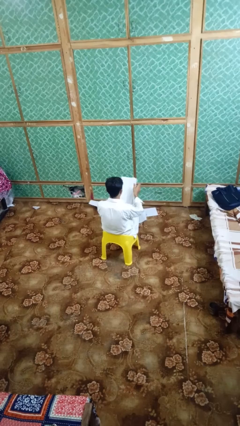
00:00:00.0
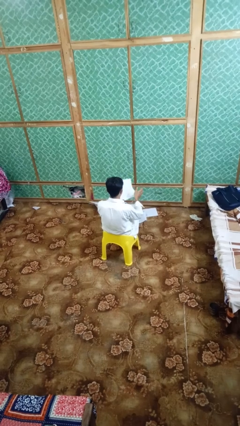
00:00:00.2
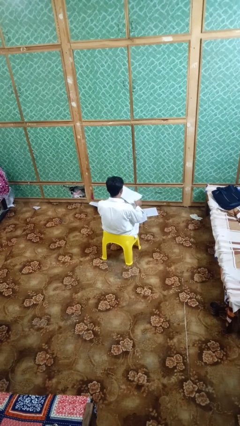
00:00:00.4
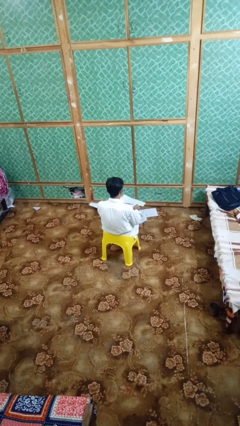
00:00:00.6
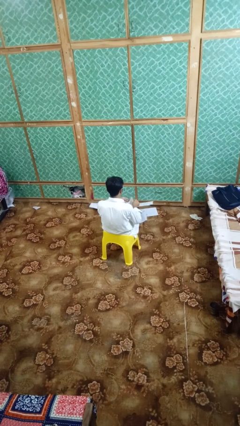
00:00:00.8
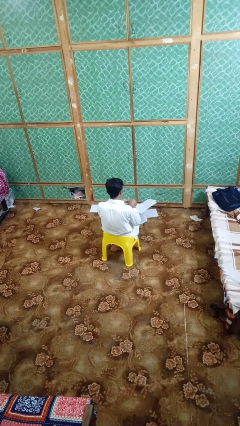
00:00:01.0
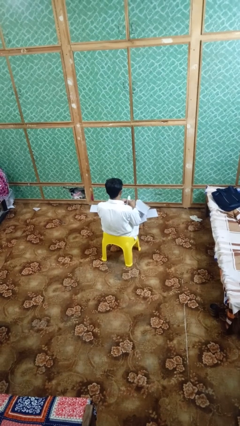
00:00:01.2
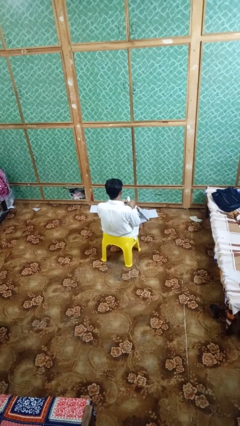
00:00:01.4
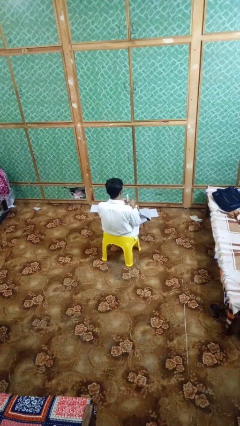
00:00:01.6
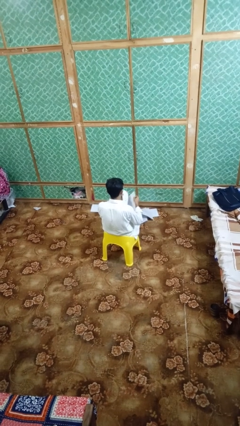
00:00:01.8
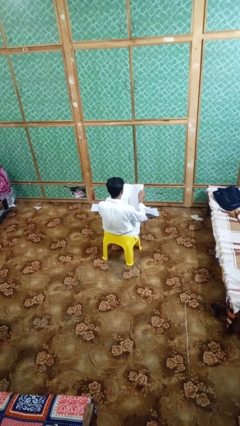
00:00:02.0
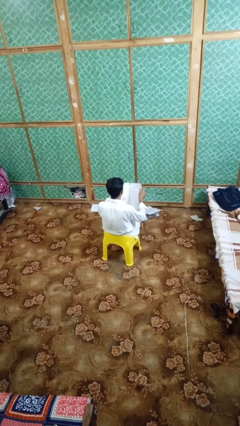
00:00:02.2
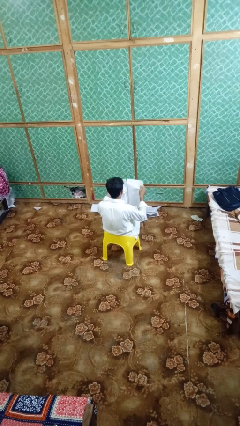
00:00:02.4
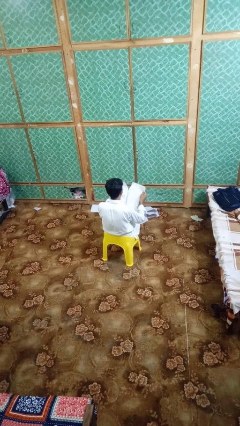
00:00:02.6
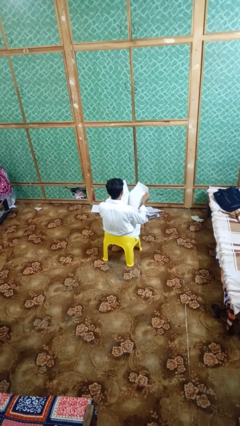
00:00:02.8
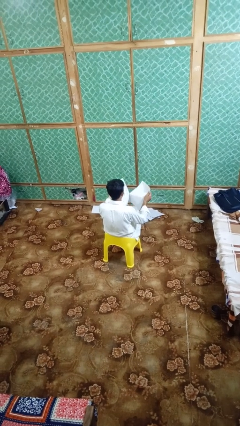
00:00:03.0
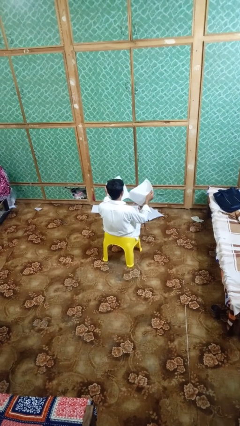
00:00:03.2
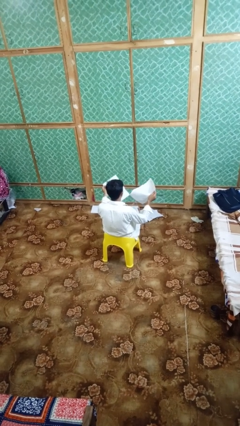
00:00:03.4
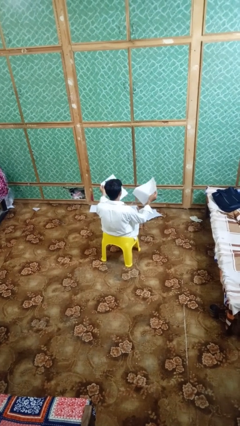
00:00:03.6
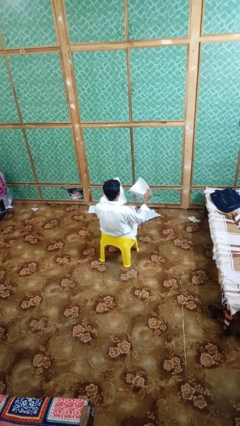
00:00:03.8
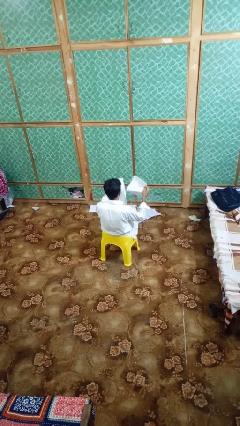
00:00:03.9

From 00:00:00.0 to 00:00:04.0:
person tears paper

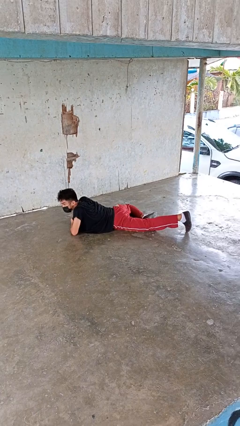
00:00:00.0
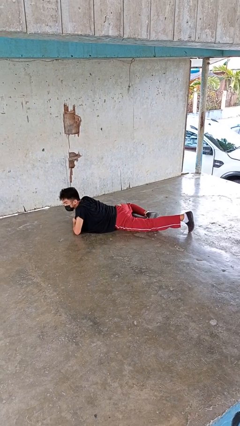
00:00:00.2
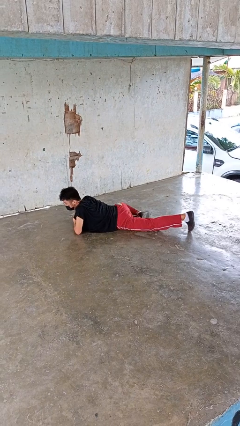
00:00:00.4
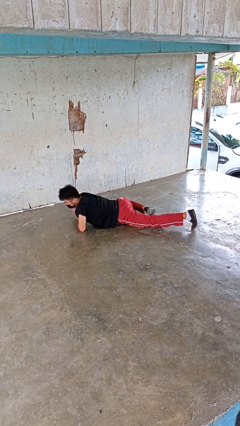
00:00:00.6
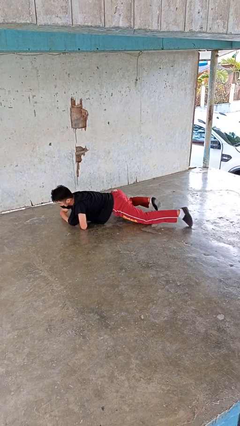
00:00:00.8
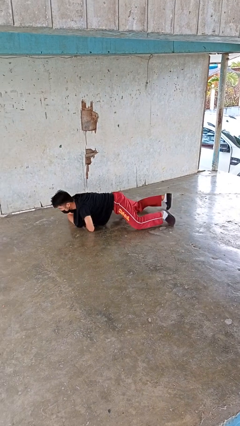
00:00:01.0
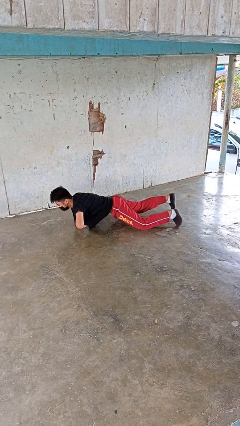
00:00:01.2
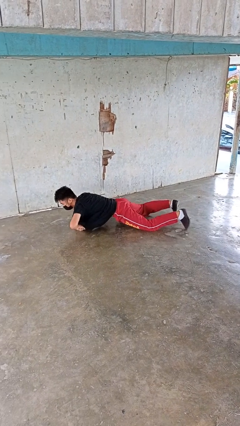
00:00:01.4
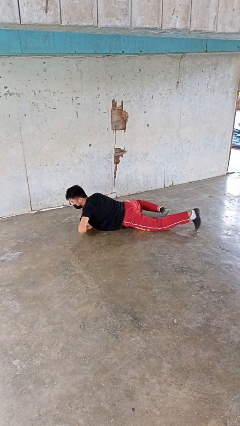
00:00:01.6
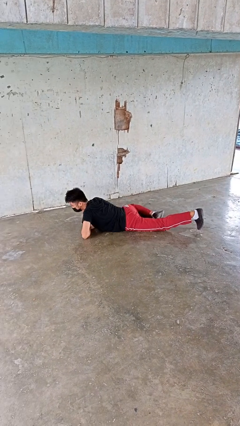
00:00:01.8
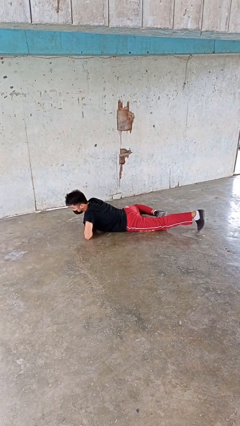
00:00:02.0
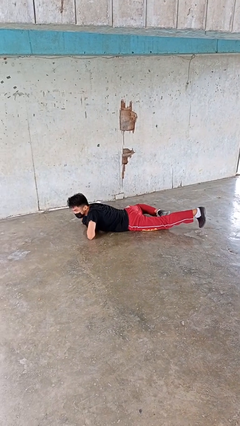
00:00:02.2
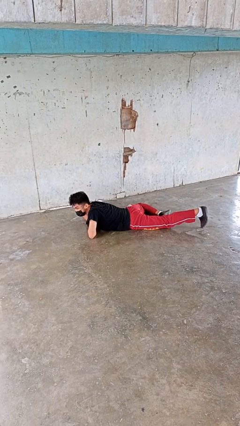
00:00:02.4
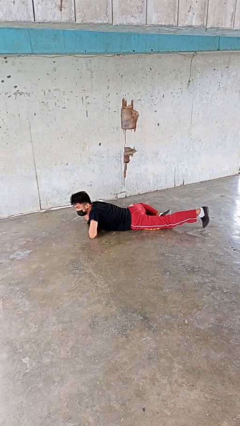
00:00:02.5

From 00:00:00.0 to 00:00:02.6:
person crawls

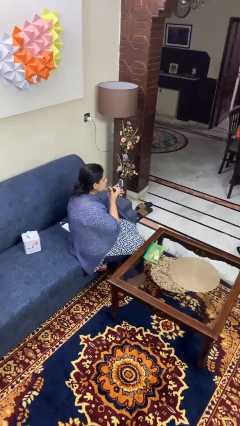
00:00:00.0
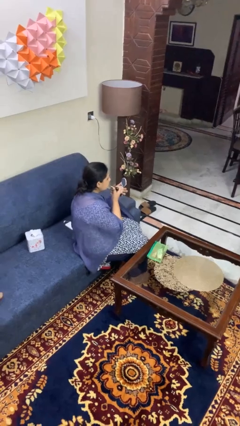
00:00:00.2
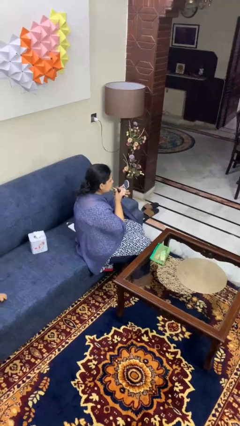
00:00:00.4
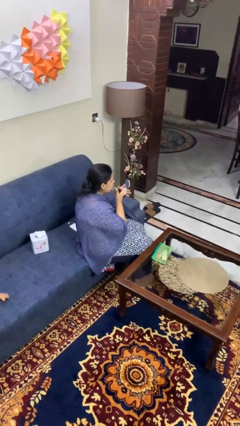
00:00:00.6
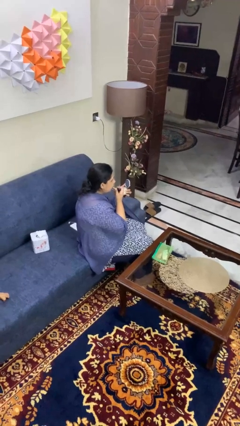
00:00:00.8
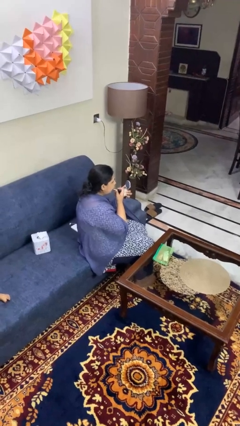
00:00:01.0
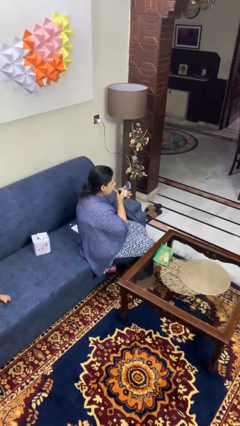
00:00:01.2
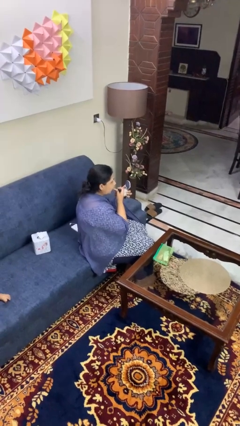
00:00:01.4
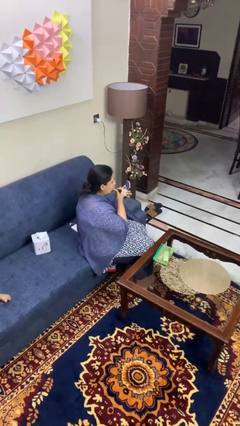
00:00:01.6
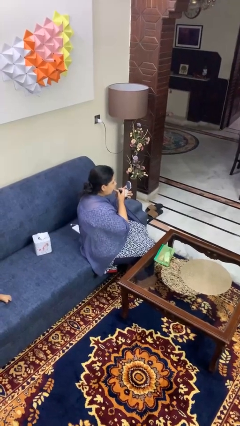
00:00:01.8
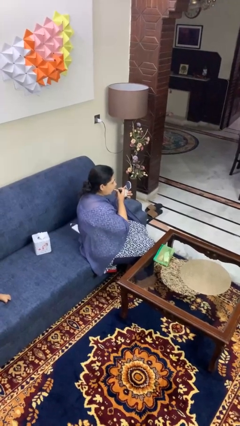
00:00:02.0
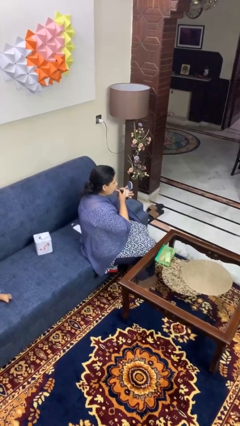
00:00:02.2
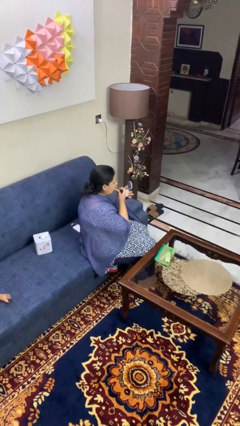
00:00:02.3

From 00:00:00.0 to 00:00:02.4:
person applies lip makeup

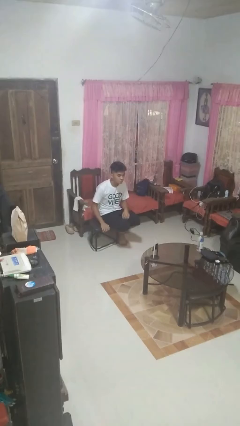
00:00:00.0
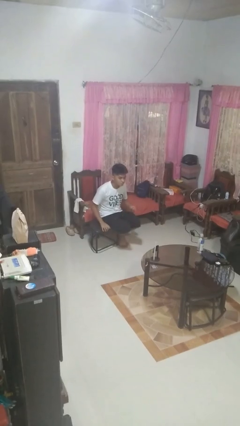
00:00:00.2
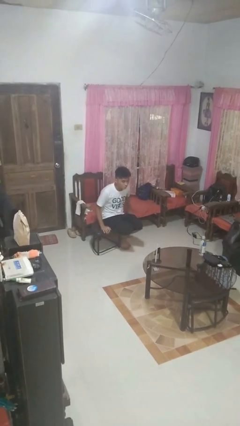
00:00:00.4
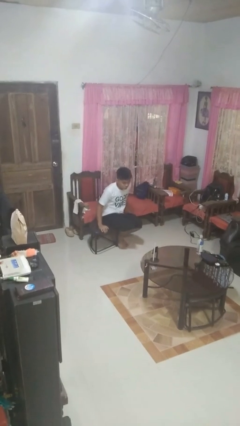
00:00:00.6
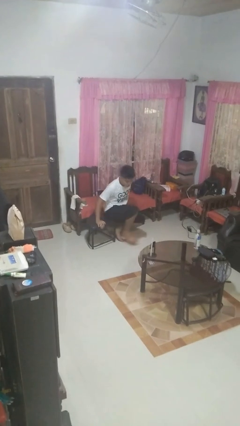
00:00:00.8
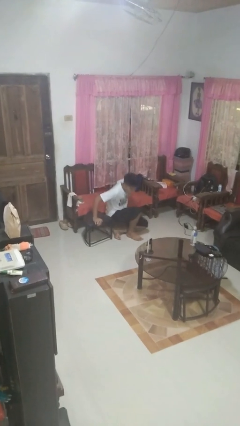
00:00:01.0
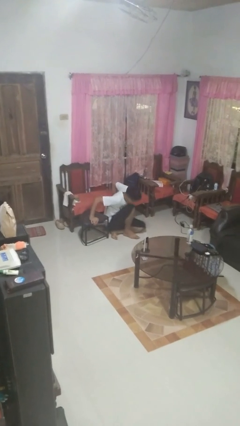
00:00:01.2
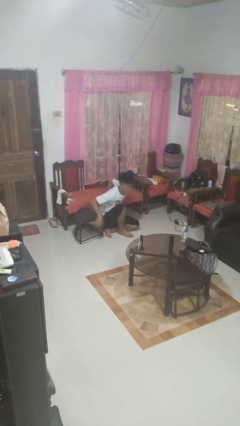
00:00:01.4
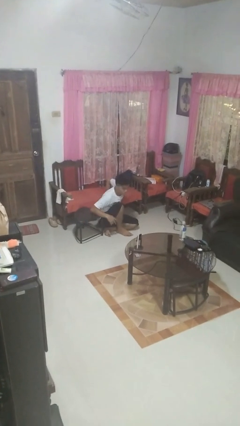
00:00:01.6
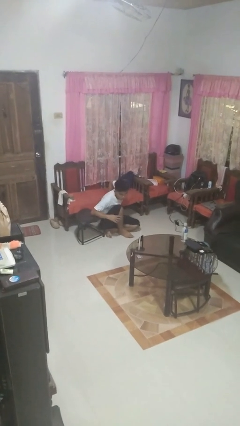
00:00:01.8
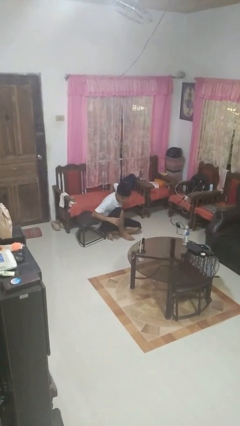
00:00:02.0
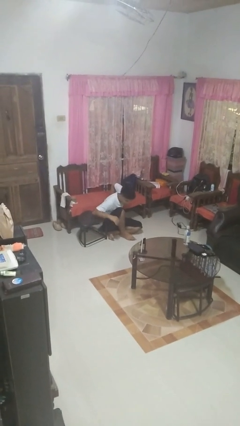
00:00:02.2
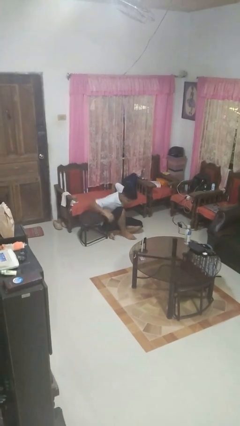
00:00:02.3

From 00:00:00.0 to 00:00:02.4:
person falls from chair

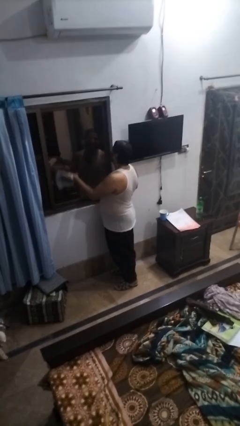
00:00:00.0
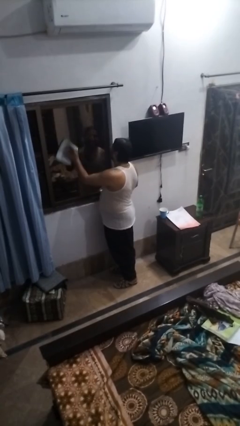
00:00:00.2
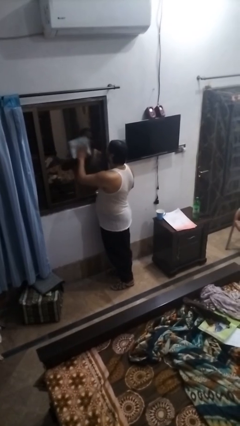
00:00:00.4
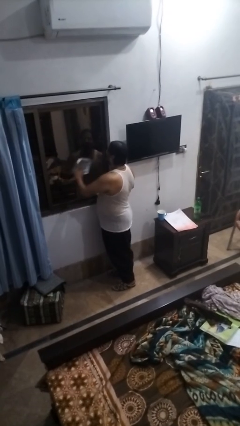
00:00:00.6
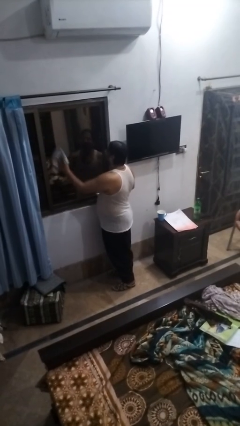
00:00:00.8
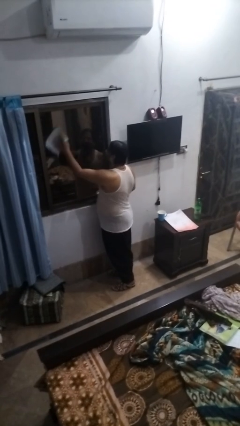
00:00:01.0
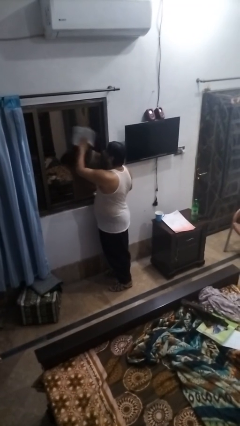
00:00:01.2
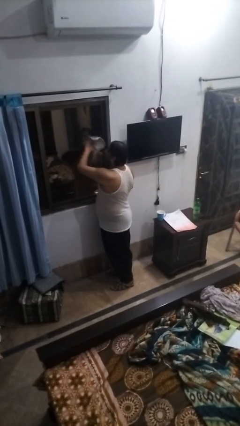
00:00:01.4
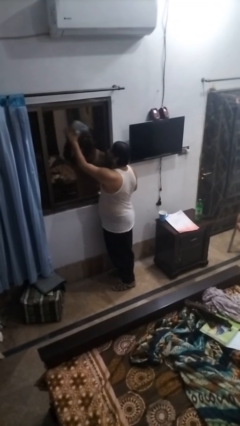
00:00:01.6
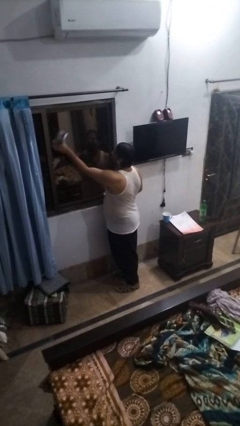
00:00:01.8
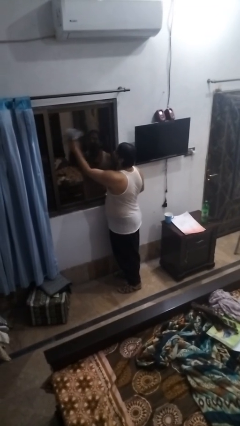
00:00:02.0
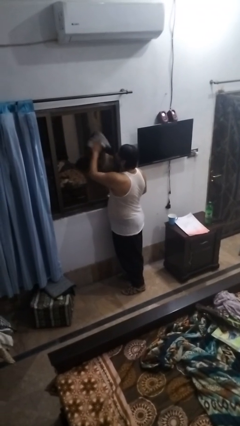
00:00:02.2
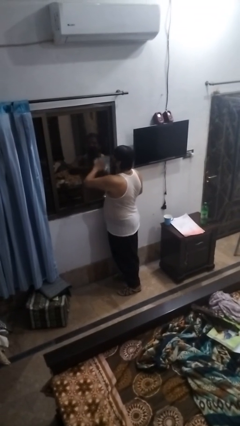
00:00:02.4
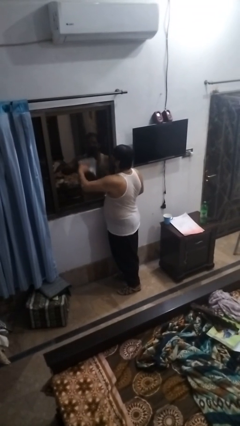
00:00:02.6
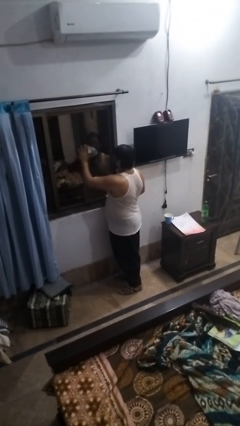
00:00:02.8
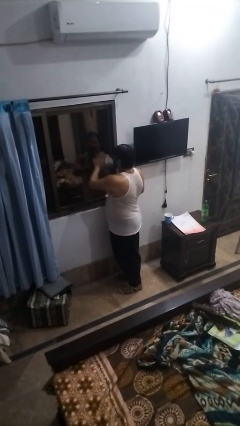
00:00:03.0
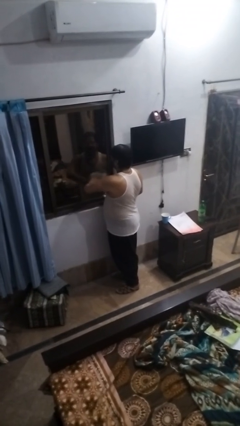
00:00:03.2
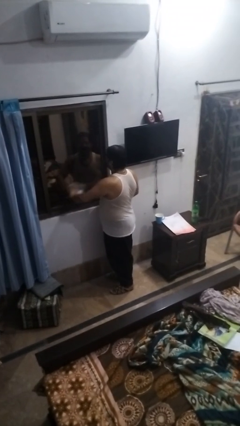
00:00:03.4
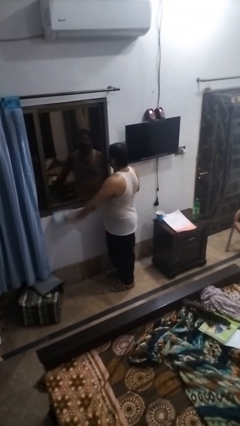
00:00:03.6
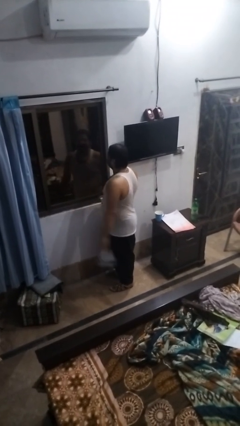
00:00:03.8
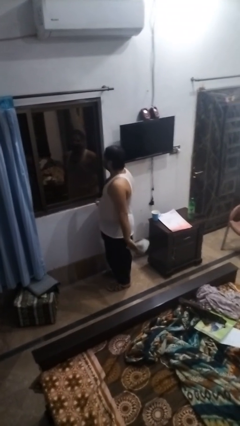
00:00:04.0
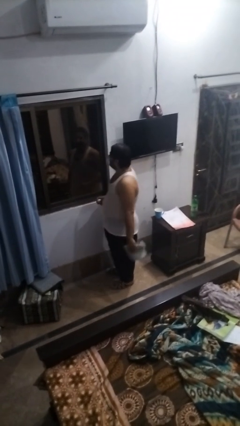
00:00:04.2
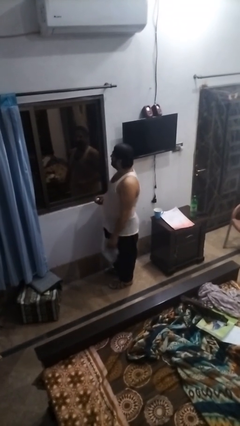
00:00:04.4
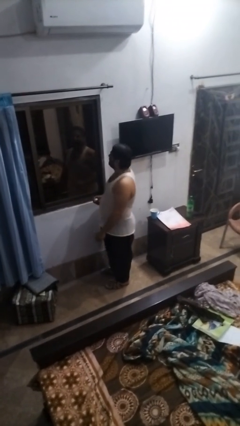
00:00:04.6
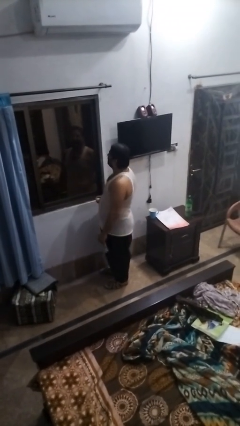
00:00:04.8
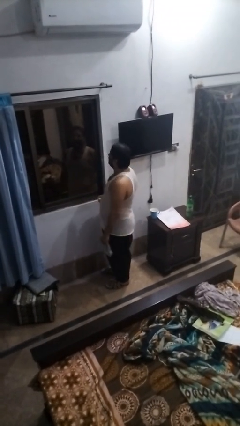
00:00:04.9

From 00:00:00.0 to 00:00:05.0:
person washes window

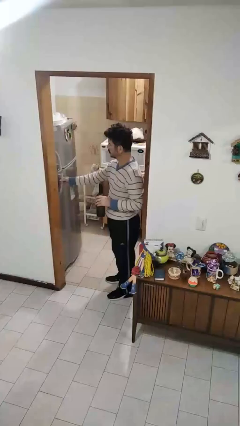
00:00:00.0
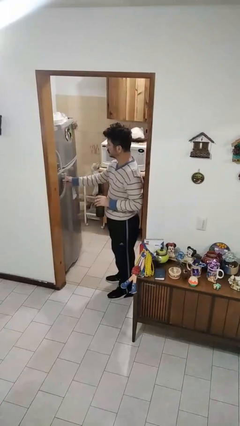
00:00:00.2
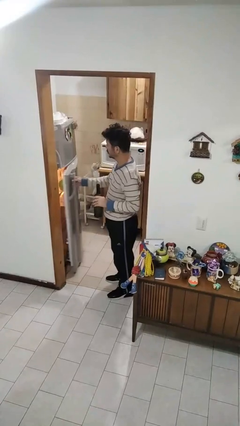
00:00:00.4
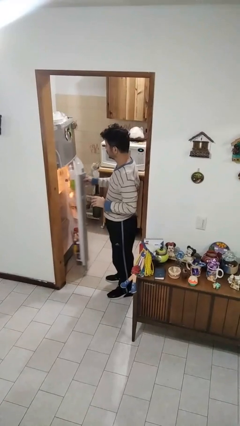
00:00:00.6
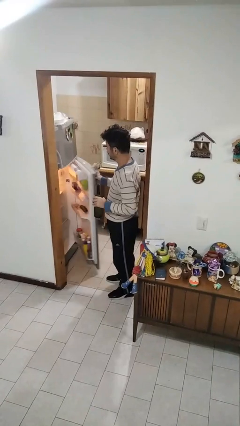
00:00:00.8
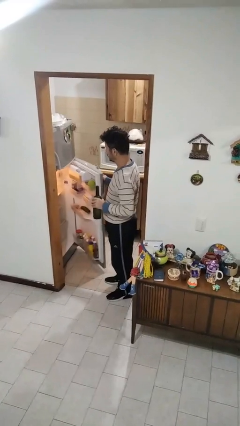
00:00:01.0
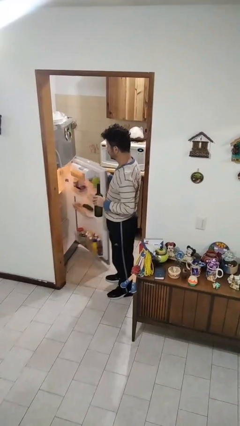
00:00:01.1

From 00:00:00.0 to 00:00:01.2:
person opens refrigerator
